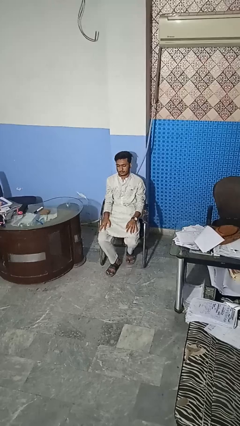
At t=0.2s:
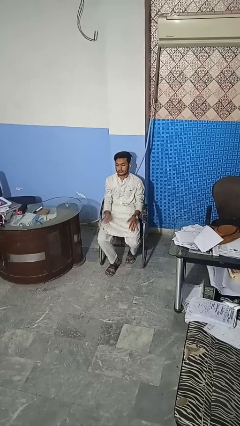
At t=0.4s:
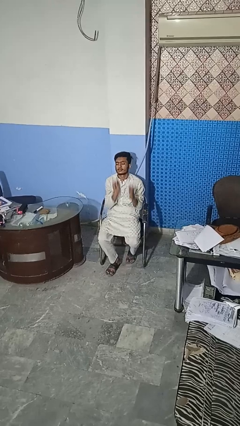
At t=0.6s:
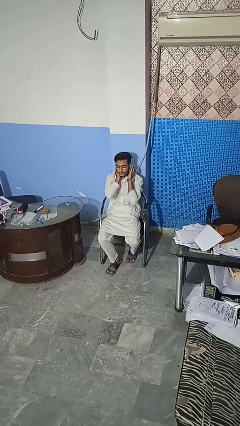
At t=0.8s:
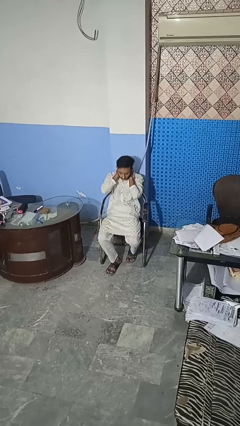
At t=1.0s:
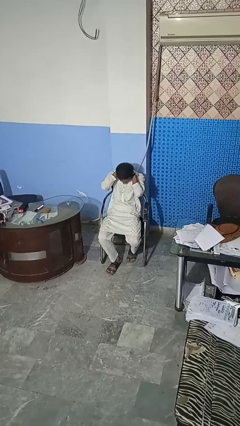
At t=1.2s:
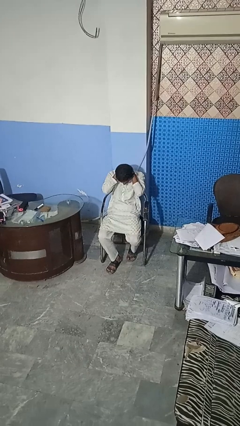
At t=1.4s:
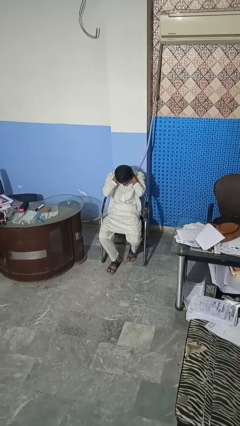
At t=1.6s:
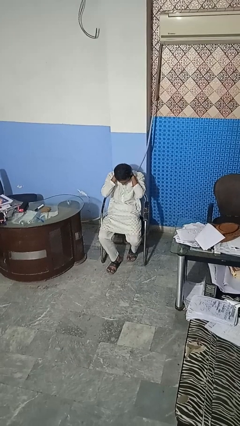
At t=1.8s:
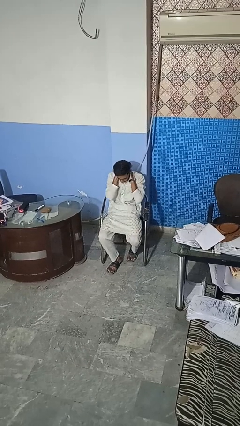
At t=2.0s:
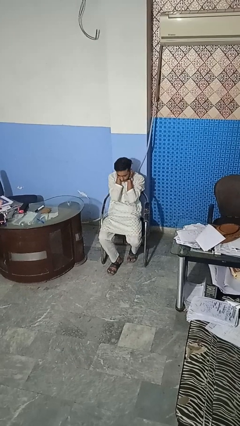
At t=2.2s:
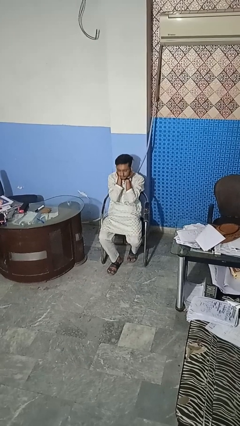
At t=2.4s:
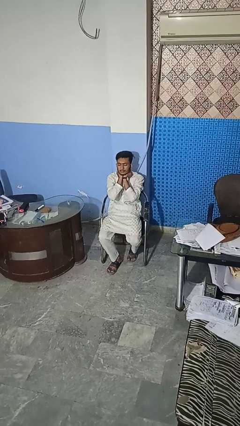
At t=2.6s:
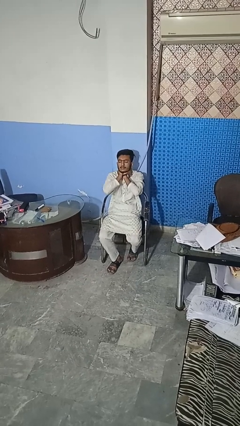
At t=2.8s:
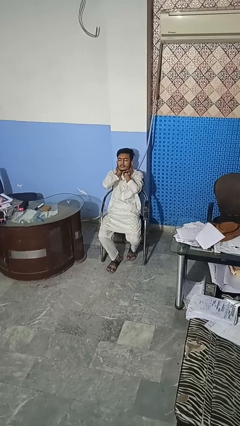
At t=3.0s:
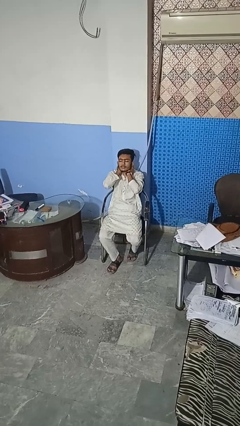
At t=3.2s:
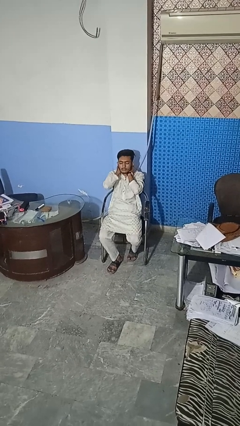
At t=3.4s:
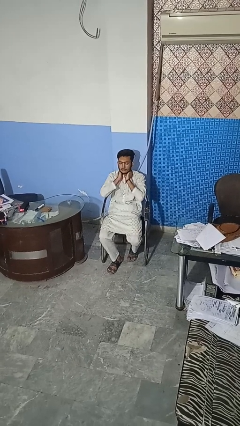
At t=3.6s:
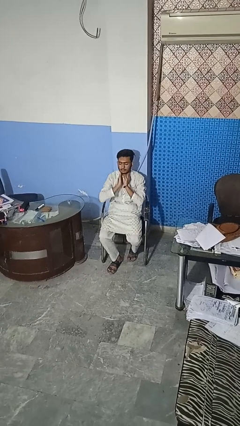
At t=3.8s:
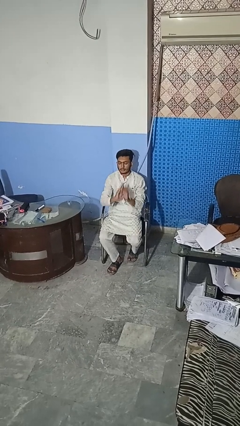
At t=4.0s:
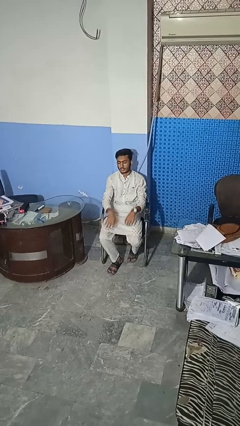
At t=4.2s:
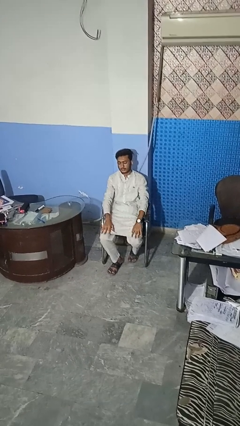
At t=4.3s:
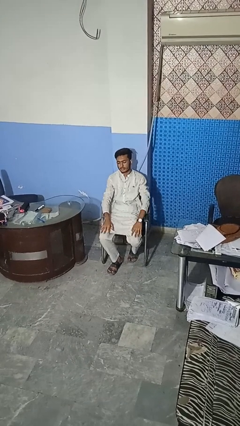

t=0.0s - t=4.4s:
person rubs neck

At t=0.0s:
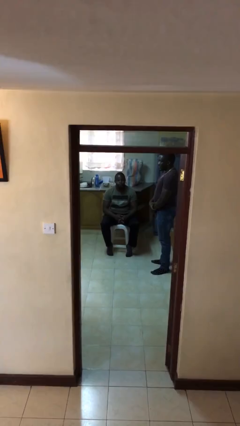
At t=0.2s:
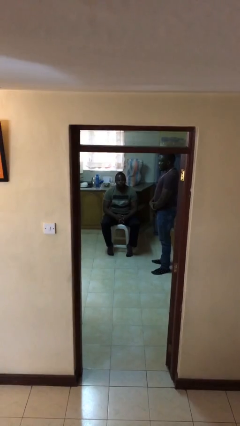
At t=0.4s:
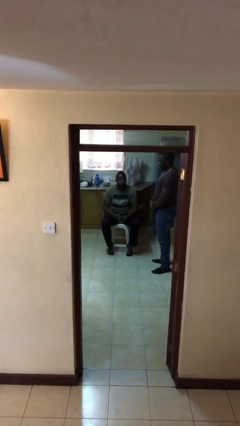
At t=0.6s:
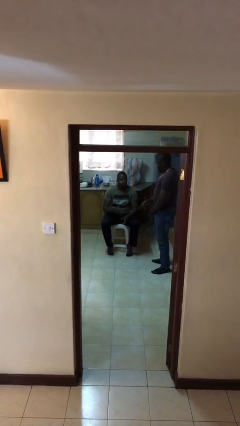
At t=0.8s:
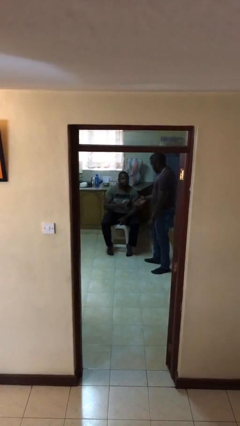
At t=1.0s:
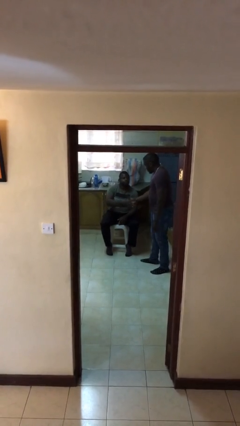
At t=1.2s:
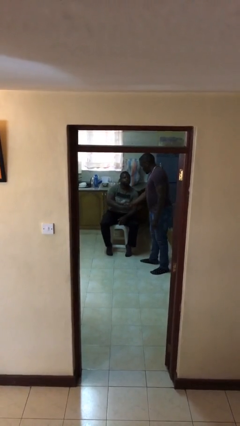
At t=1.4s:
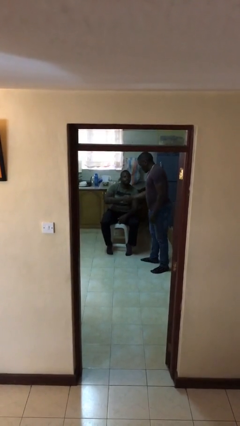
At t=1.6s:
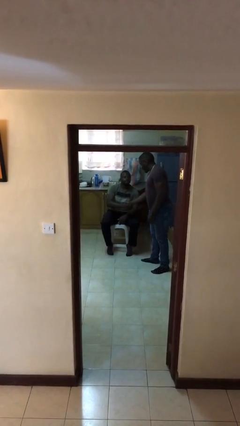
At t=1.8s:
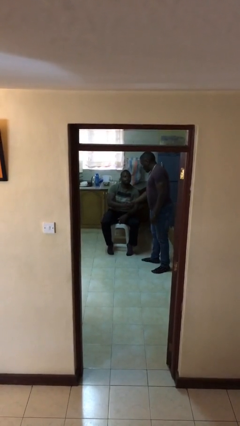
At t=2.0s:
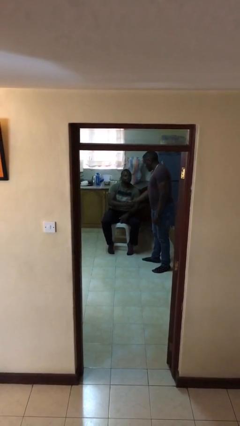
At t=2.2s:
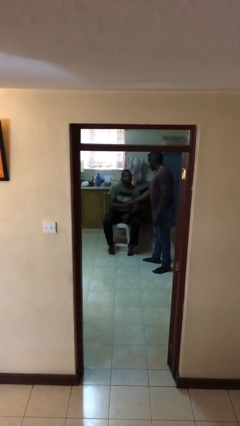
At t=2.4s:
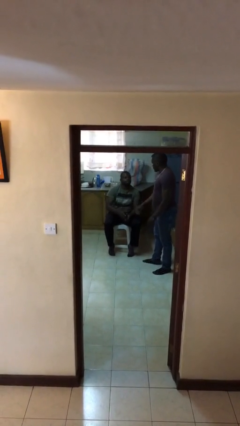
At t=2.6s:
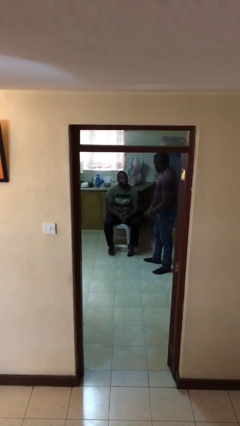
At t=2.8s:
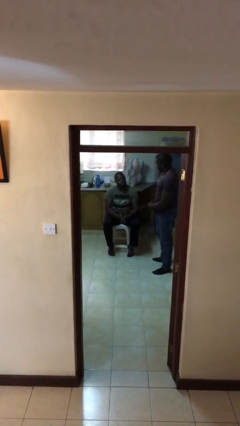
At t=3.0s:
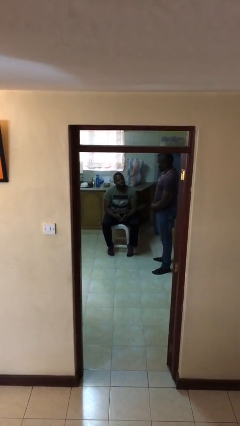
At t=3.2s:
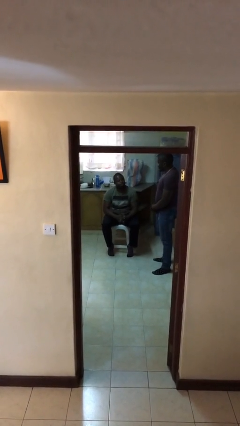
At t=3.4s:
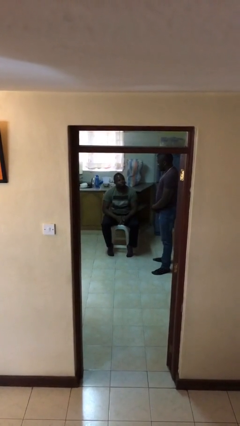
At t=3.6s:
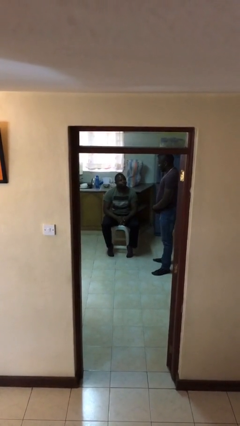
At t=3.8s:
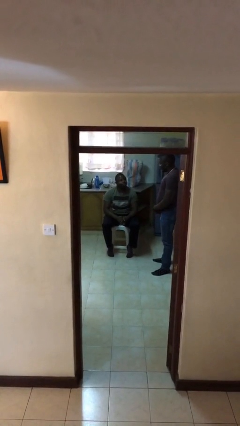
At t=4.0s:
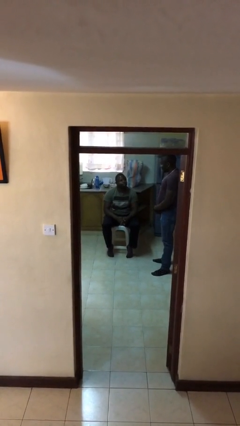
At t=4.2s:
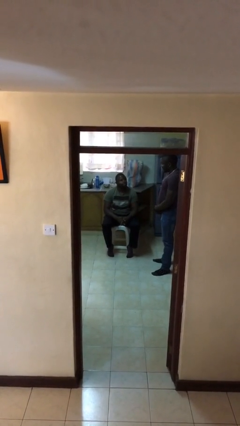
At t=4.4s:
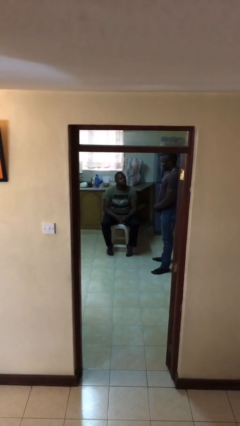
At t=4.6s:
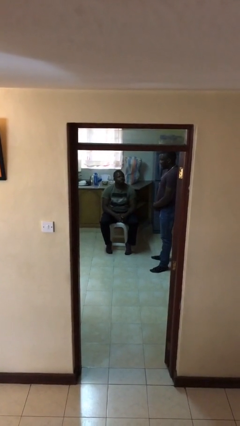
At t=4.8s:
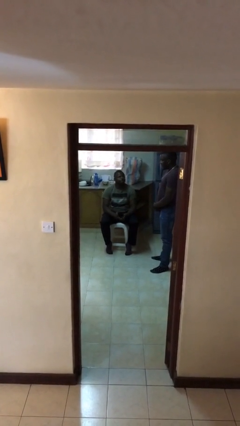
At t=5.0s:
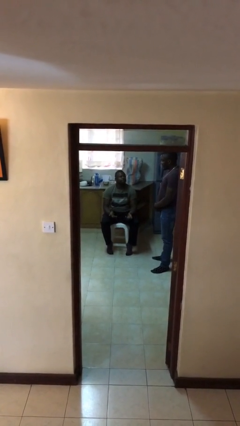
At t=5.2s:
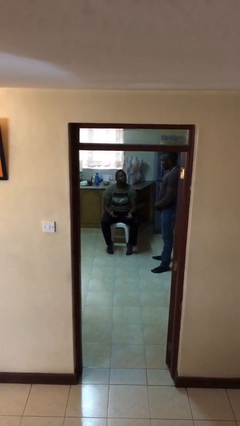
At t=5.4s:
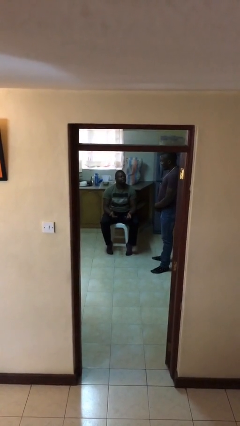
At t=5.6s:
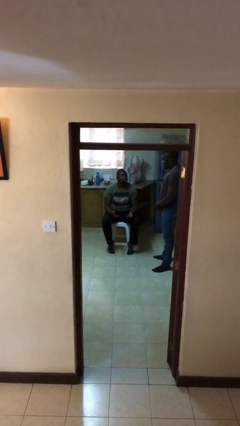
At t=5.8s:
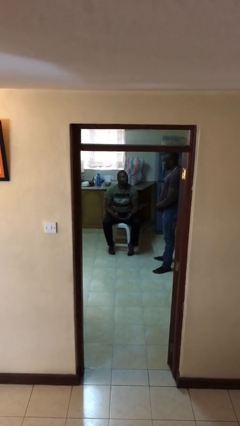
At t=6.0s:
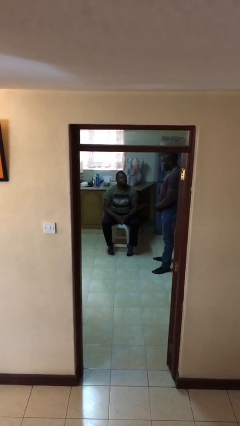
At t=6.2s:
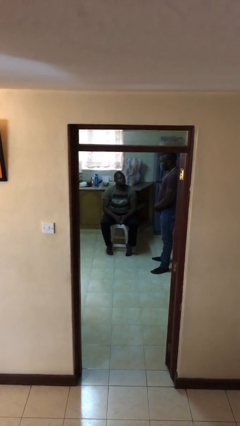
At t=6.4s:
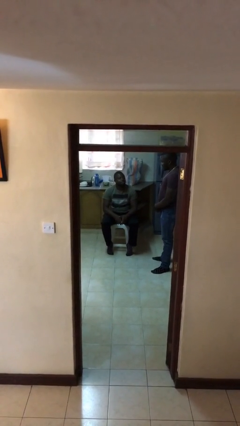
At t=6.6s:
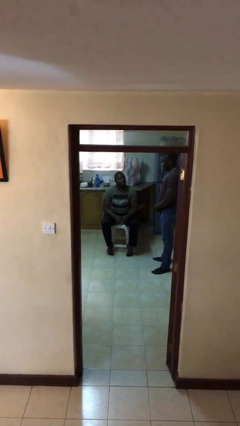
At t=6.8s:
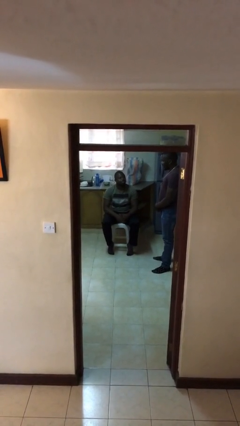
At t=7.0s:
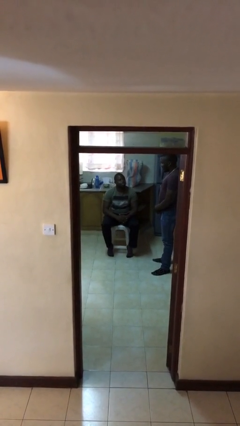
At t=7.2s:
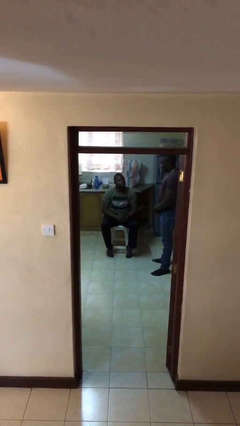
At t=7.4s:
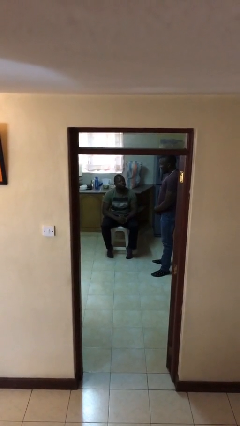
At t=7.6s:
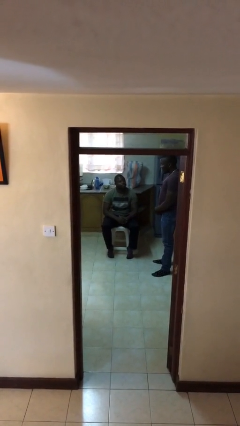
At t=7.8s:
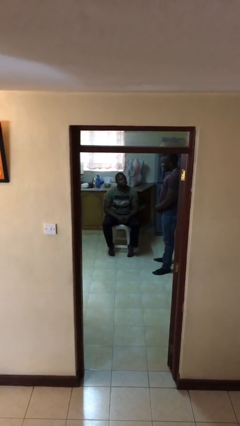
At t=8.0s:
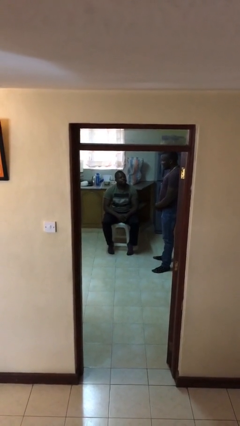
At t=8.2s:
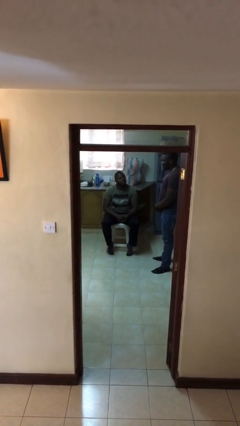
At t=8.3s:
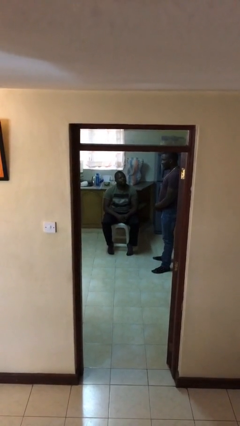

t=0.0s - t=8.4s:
person shakes hand

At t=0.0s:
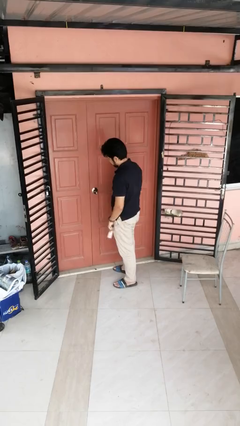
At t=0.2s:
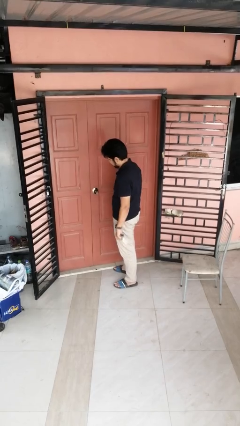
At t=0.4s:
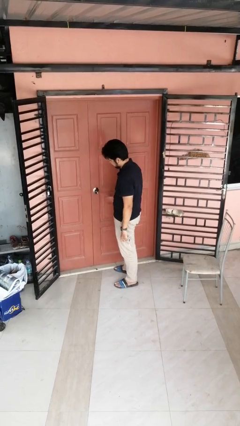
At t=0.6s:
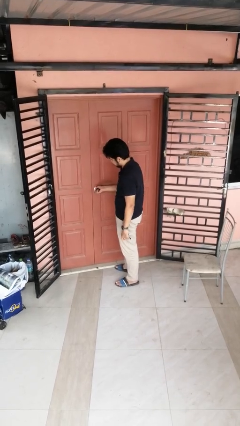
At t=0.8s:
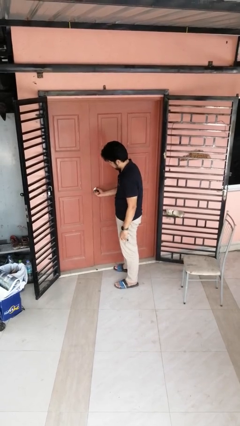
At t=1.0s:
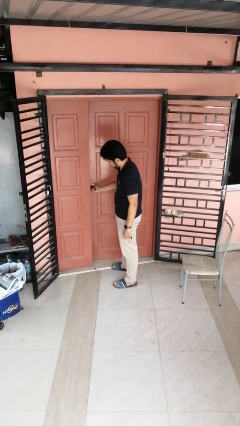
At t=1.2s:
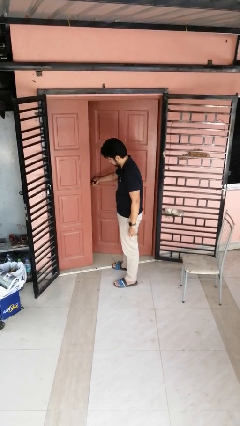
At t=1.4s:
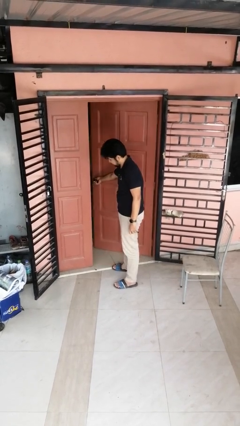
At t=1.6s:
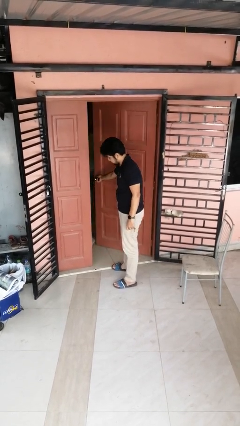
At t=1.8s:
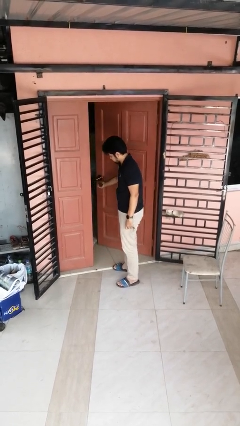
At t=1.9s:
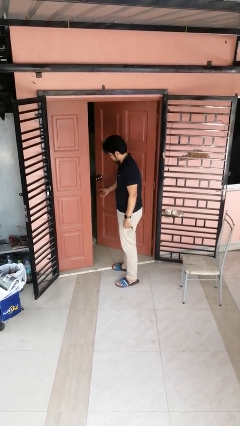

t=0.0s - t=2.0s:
person opens facility door

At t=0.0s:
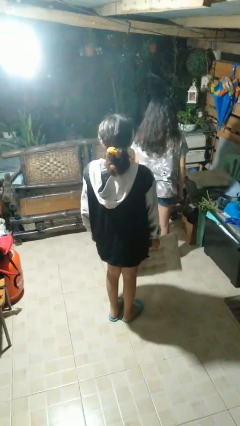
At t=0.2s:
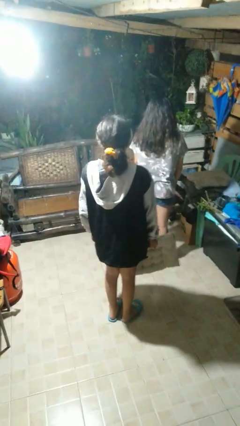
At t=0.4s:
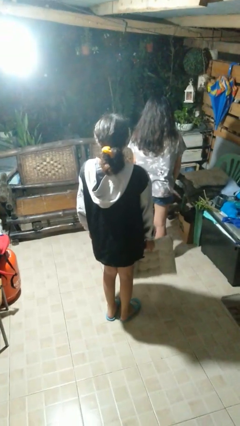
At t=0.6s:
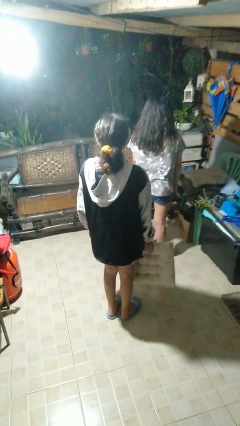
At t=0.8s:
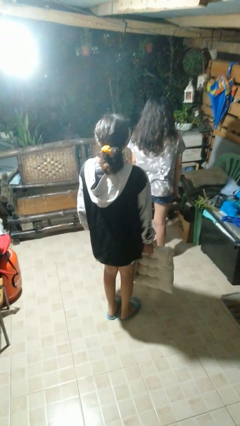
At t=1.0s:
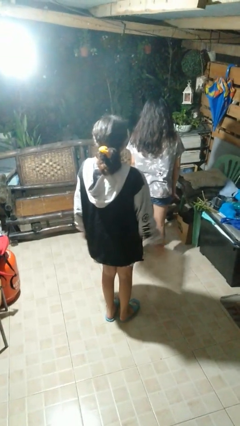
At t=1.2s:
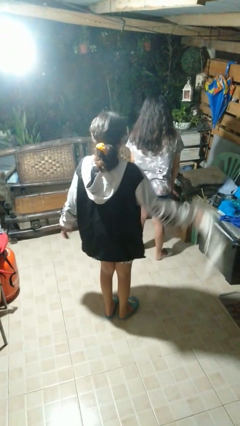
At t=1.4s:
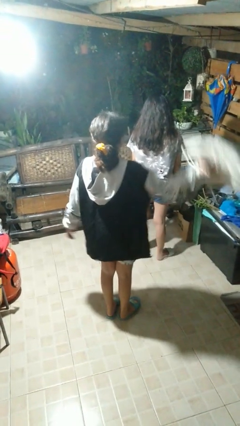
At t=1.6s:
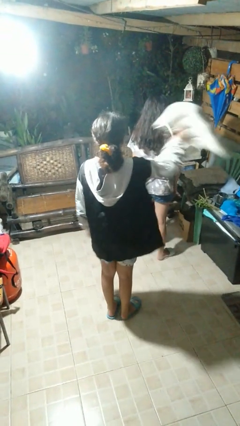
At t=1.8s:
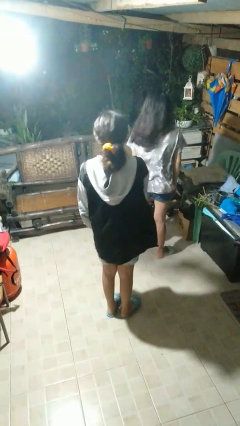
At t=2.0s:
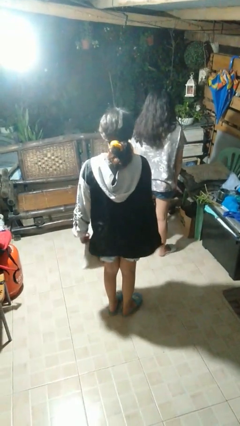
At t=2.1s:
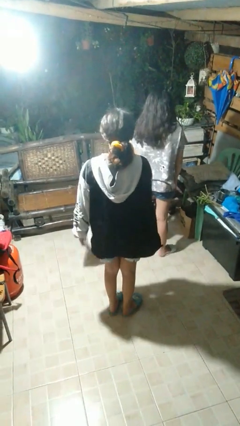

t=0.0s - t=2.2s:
person hits person with pillow

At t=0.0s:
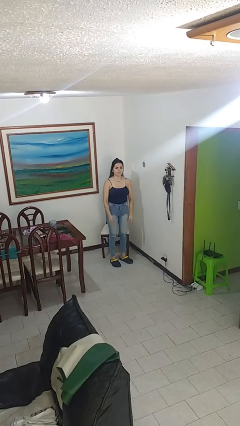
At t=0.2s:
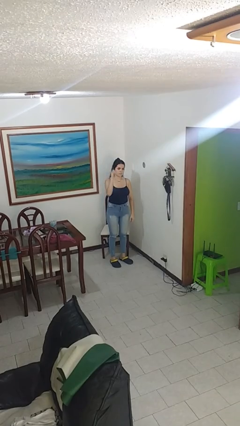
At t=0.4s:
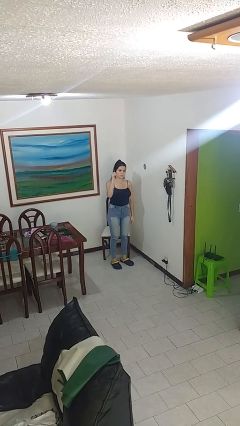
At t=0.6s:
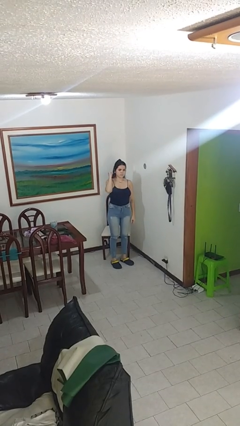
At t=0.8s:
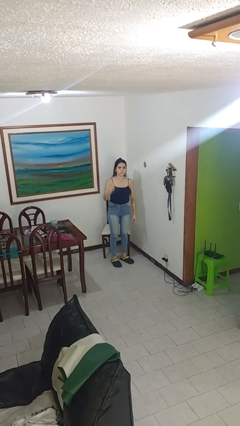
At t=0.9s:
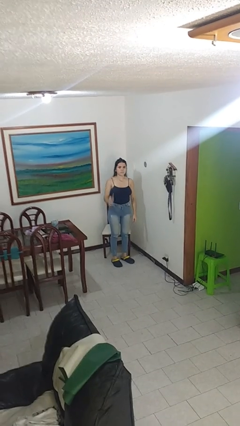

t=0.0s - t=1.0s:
person gestures behind me
